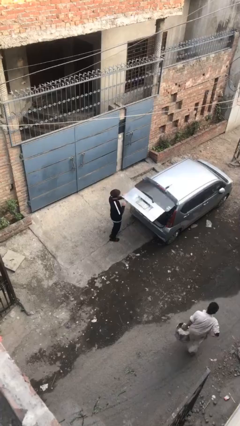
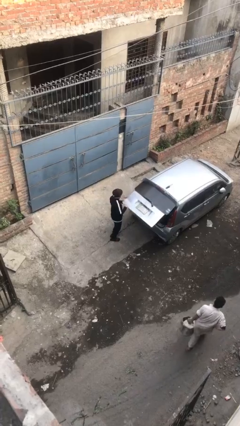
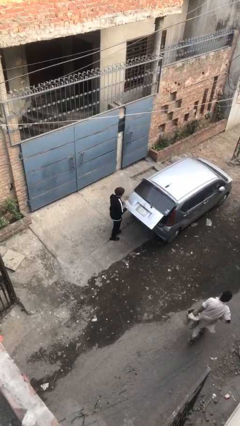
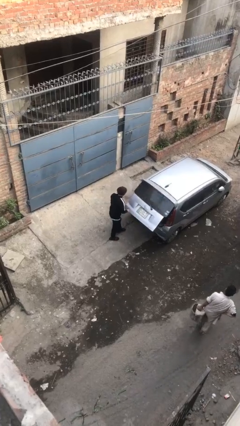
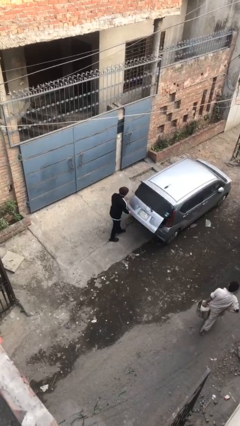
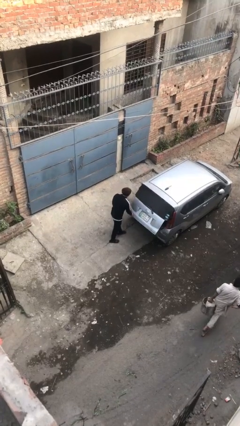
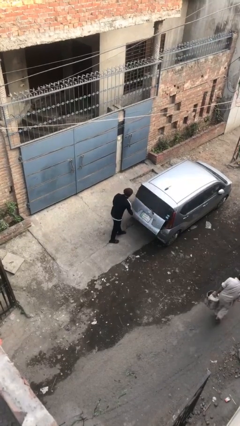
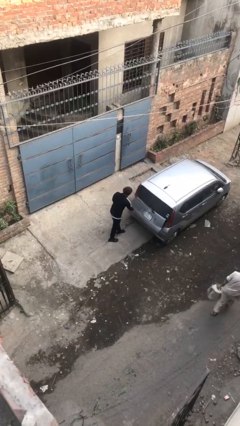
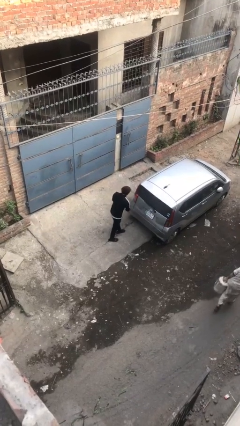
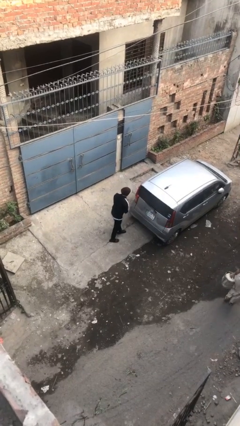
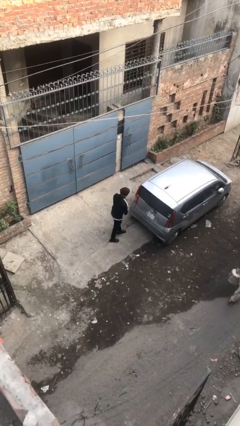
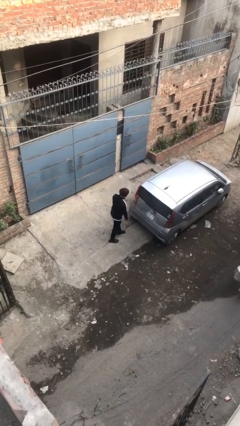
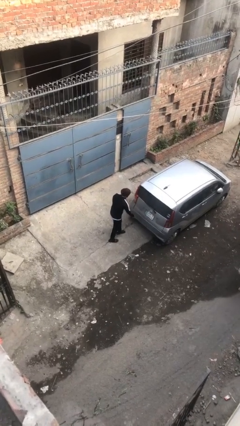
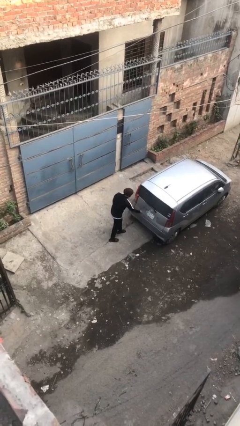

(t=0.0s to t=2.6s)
person closes car trunk

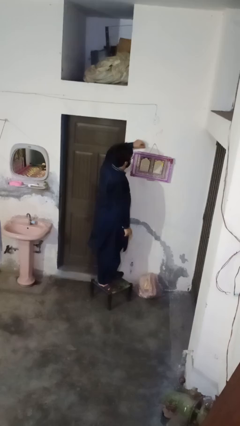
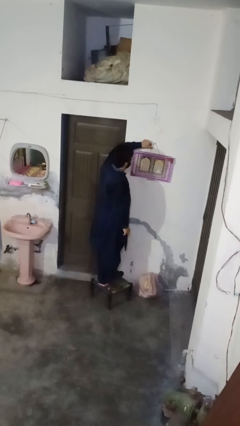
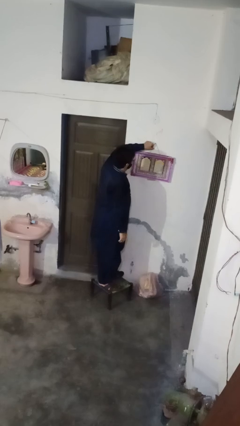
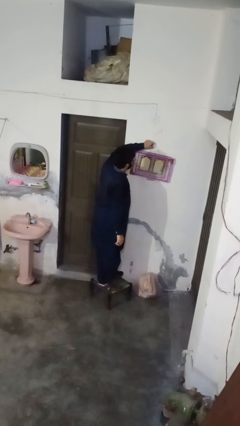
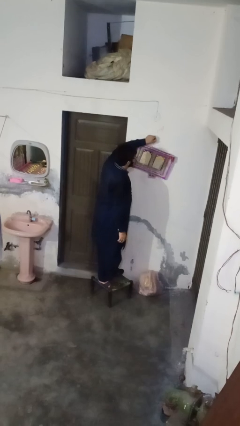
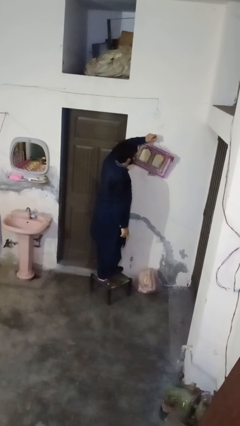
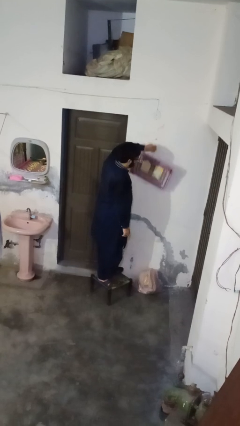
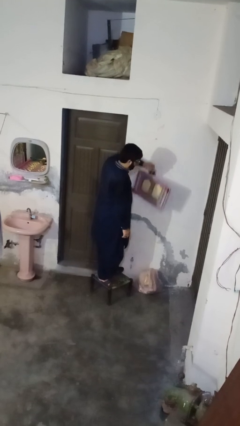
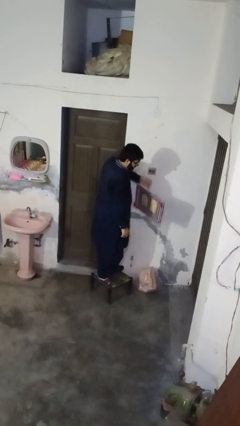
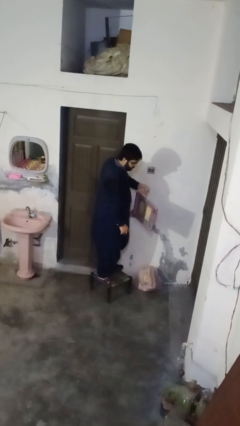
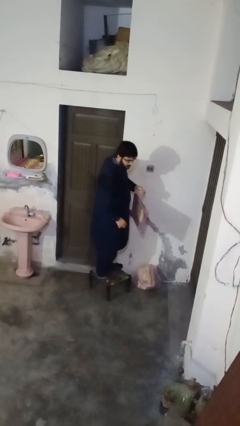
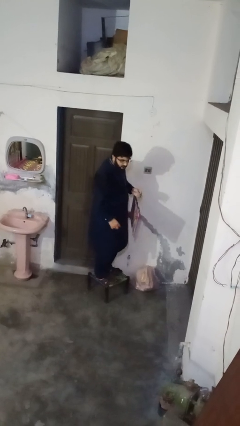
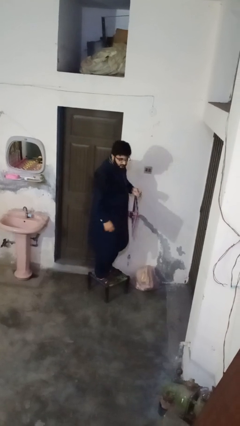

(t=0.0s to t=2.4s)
person takes down picture frame

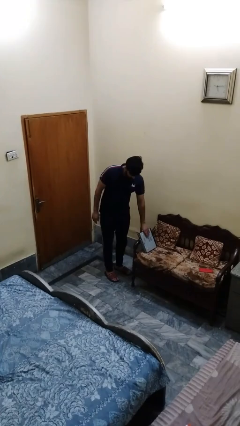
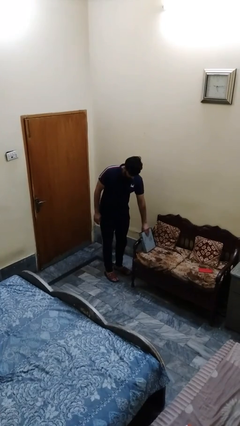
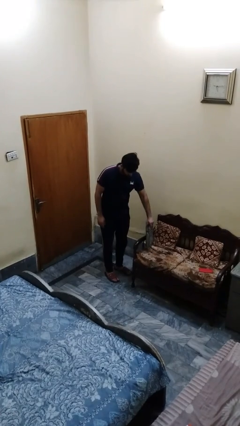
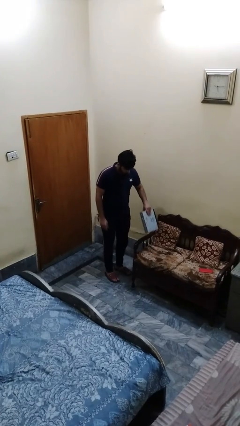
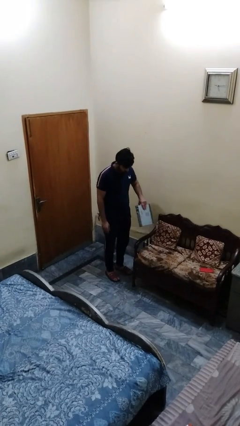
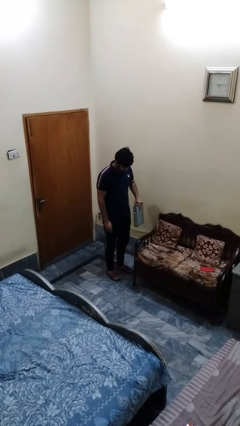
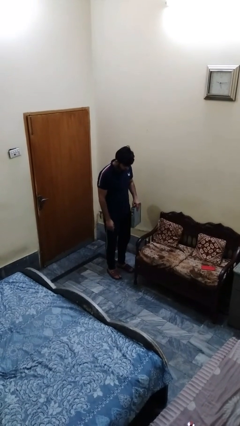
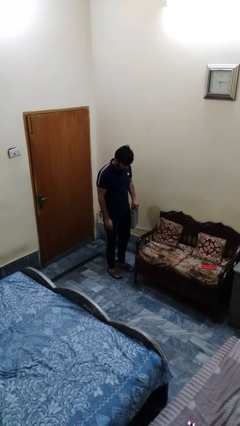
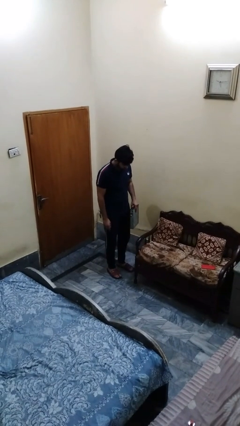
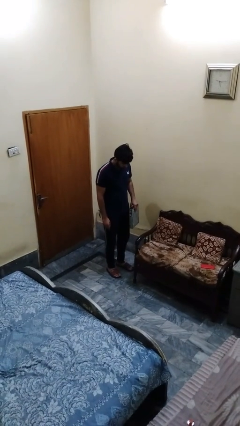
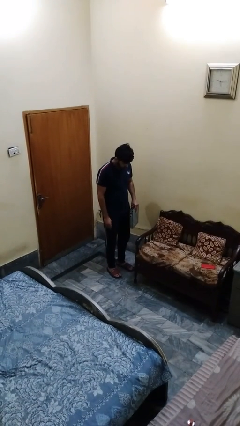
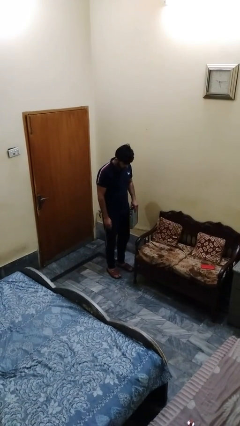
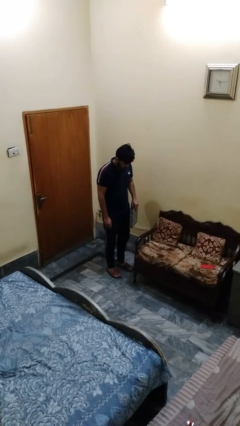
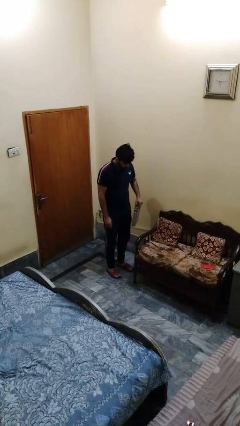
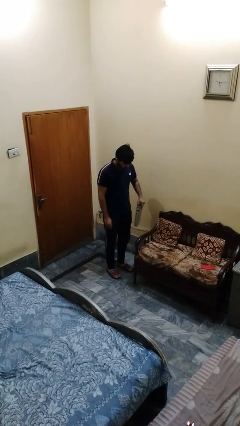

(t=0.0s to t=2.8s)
person picks up object from couch

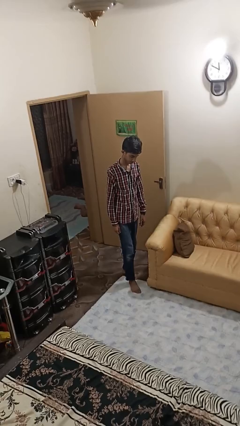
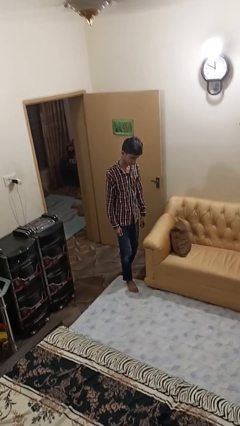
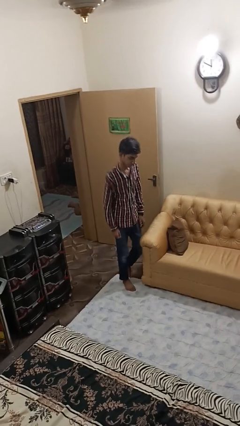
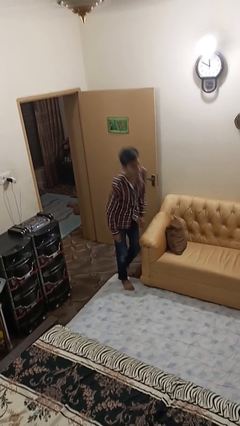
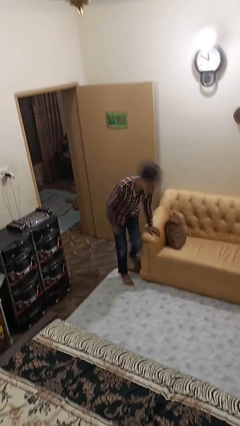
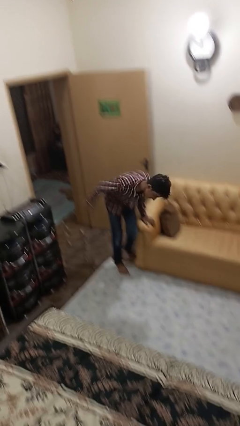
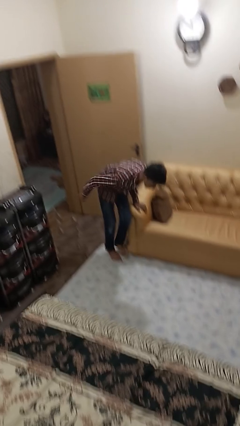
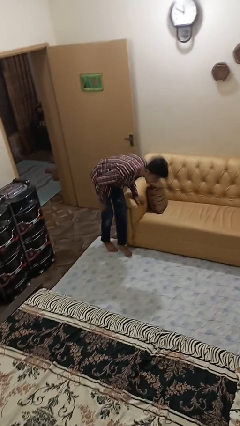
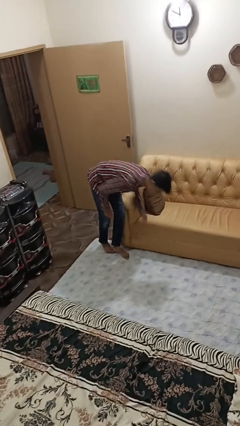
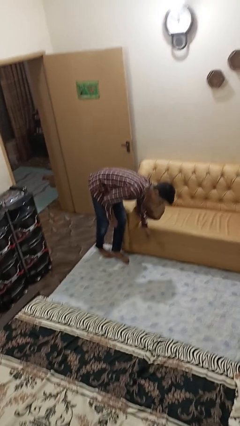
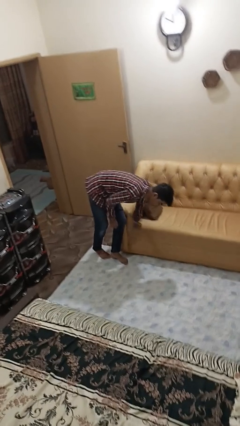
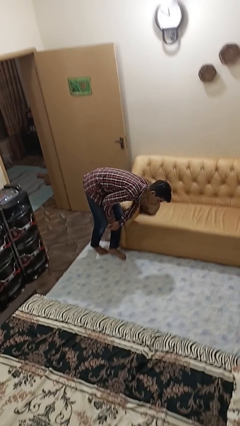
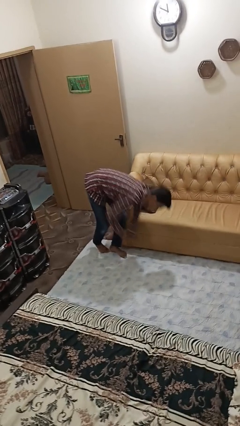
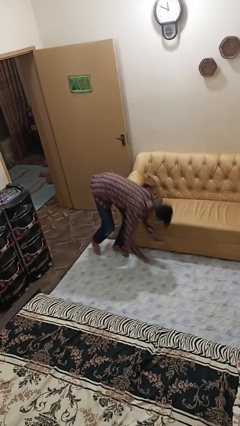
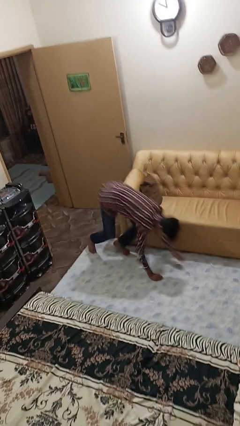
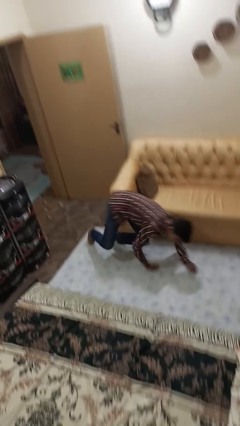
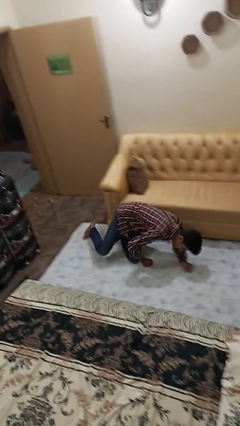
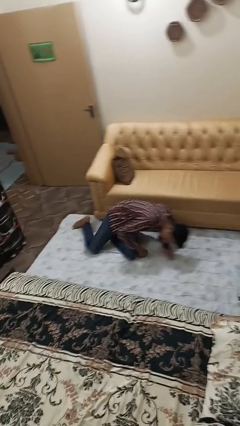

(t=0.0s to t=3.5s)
person trips on object on floor

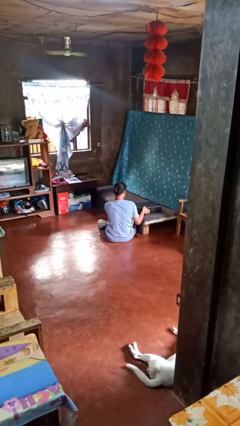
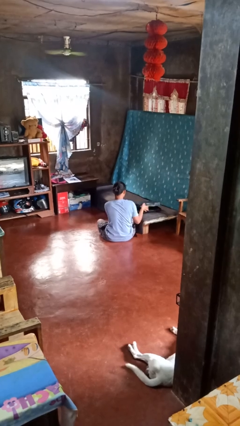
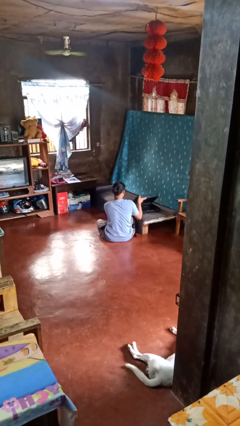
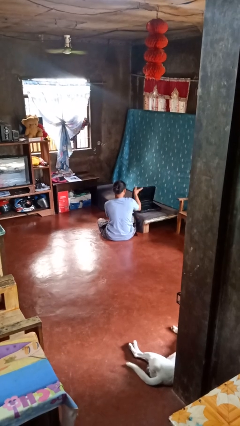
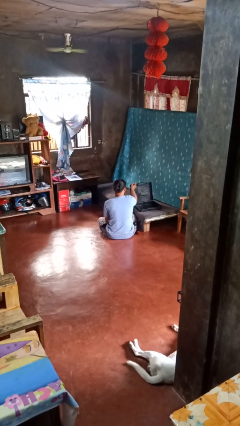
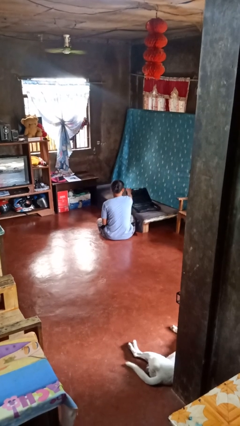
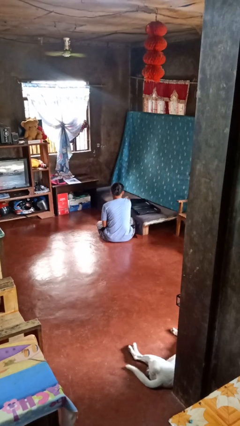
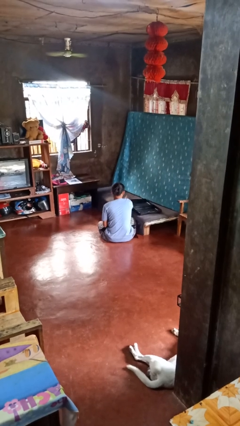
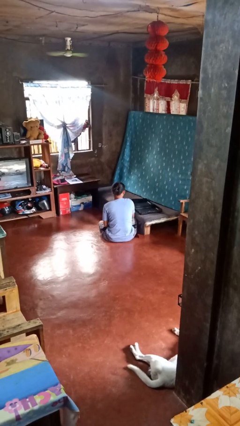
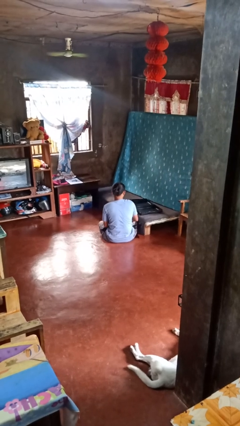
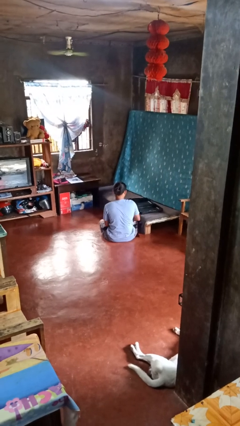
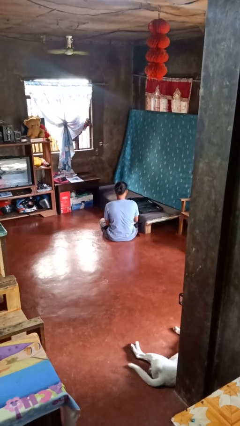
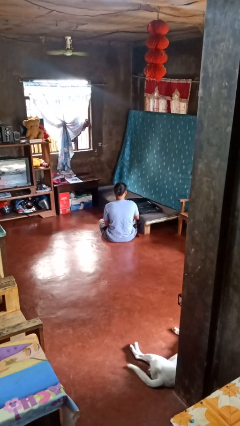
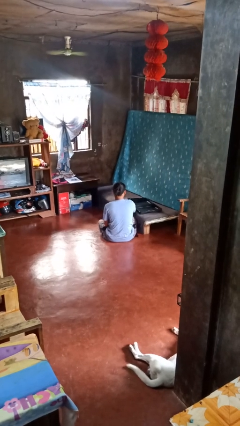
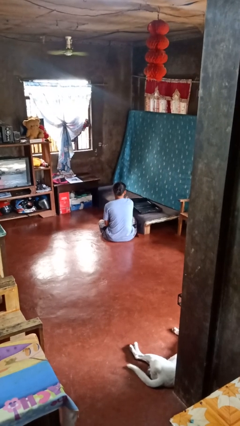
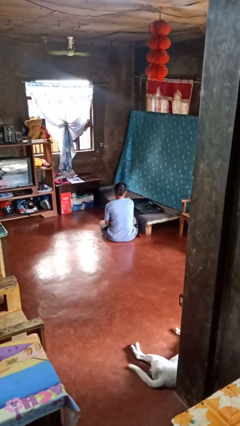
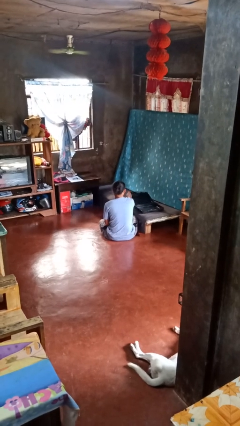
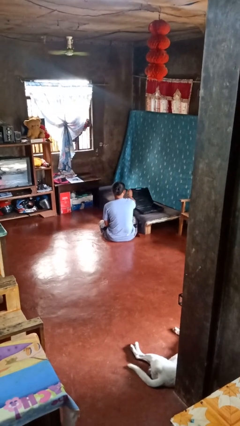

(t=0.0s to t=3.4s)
person opens suitcase

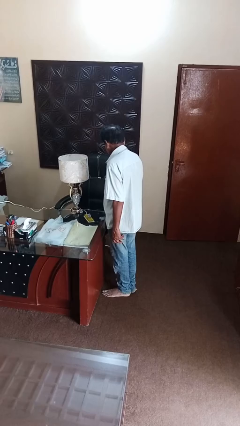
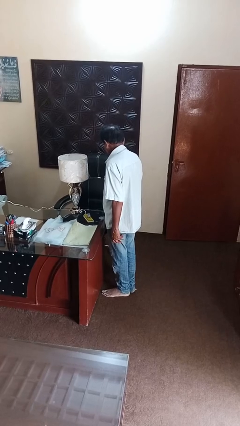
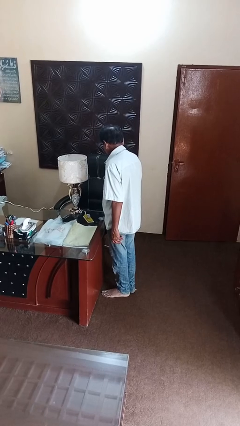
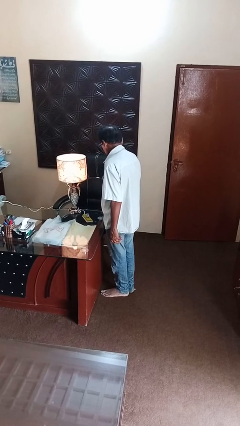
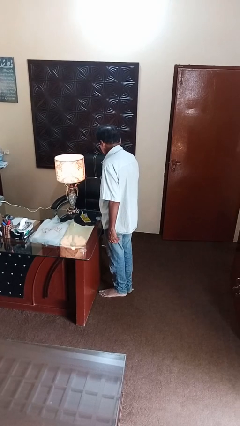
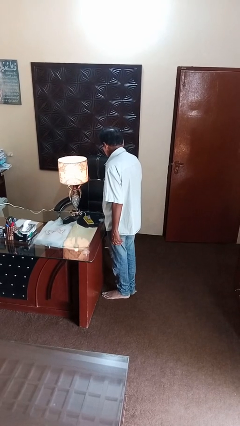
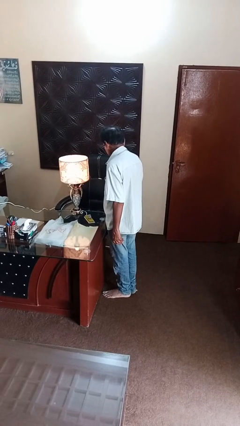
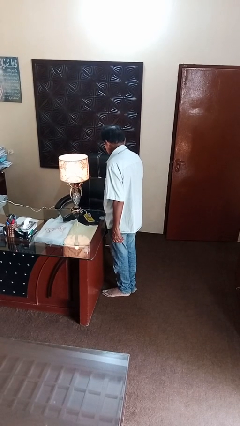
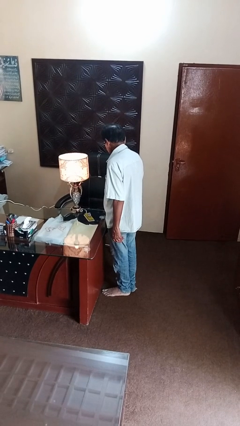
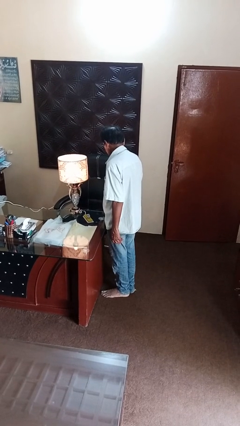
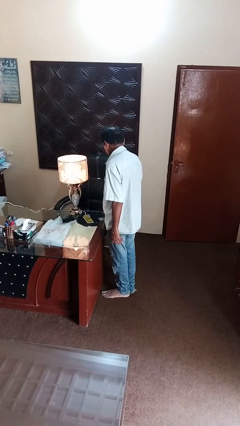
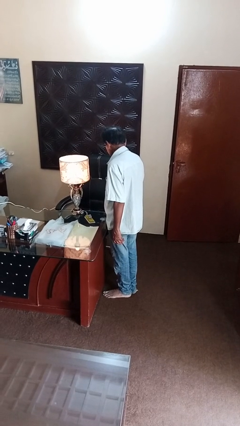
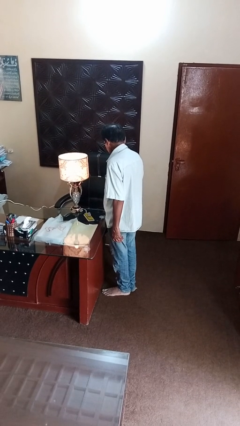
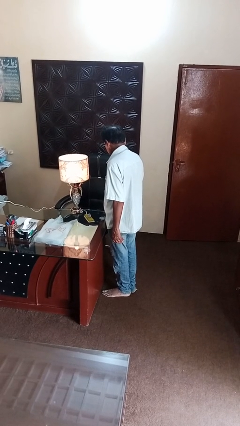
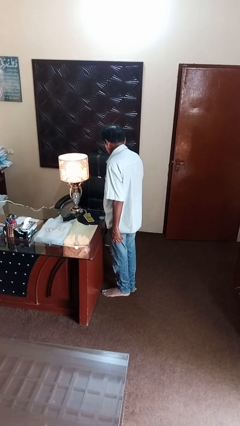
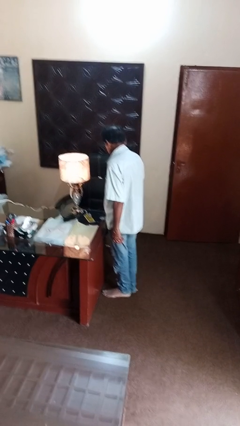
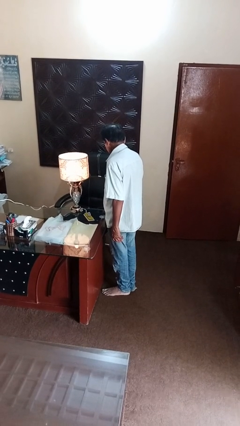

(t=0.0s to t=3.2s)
person turns on lamp
